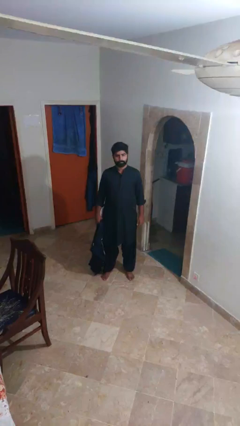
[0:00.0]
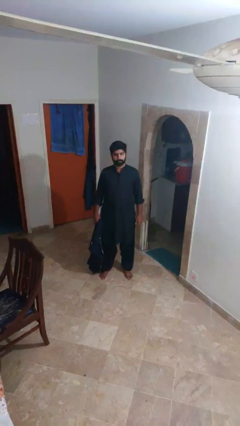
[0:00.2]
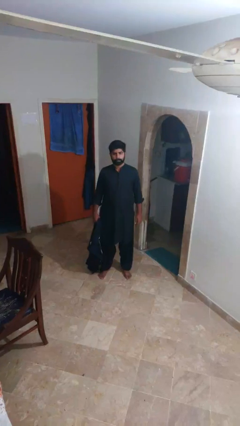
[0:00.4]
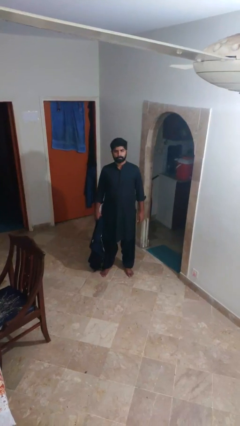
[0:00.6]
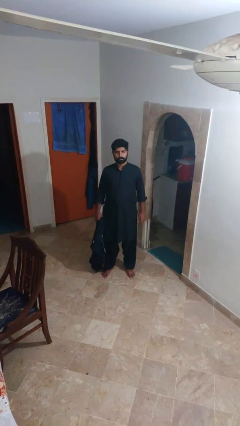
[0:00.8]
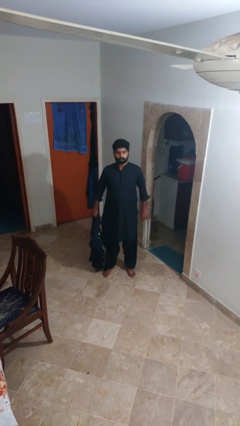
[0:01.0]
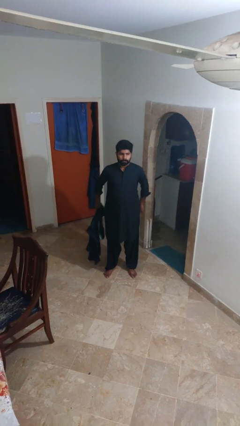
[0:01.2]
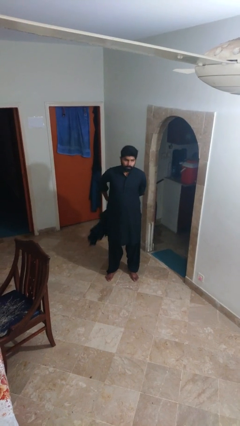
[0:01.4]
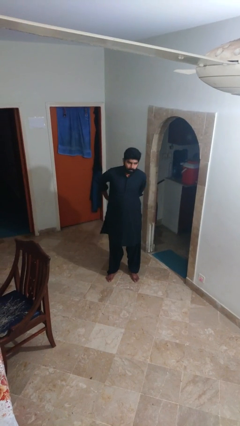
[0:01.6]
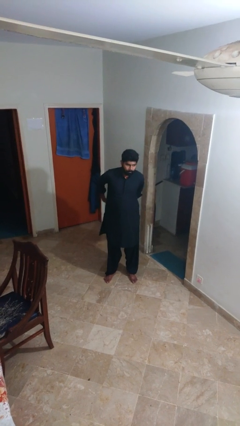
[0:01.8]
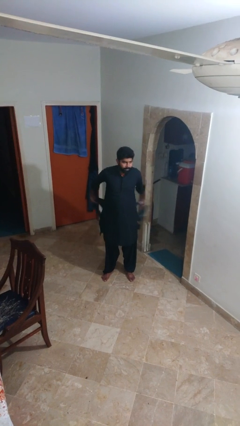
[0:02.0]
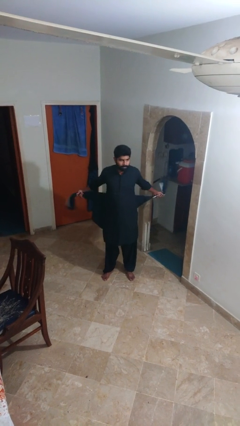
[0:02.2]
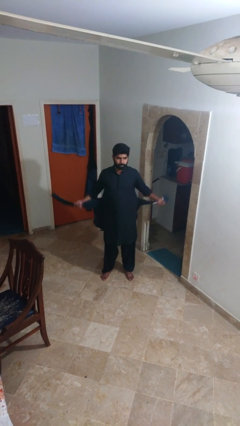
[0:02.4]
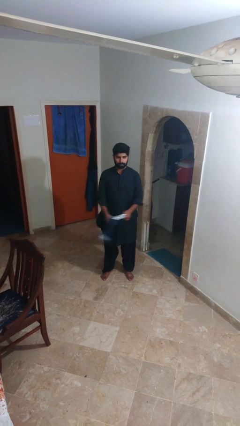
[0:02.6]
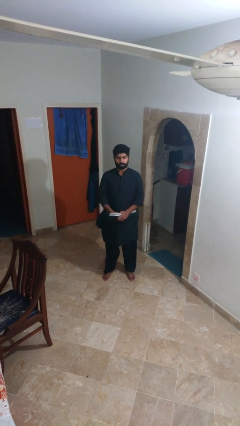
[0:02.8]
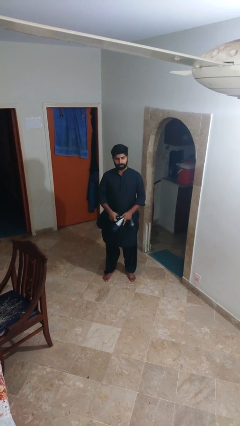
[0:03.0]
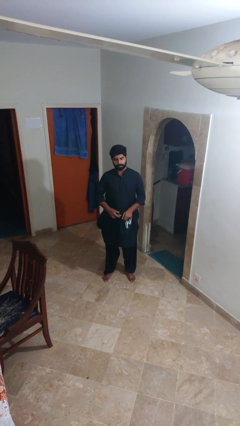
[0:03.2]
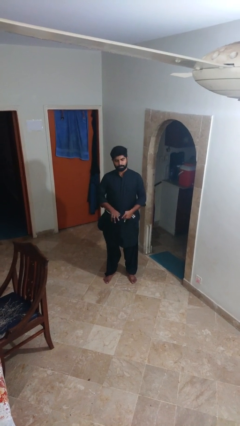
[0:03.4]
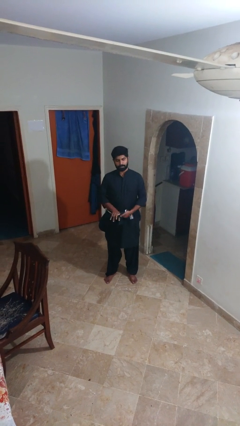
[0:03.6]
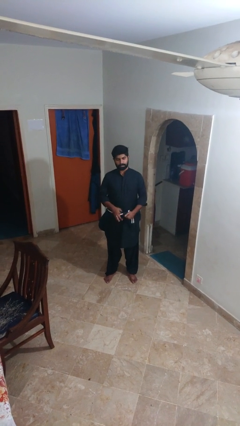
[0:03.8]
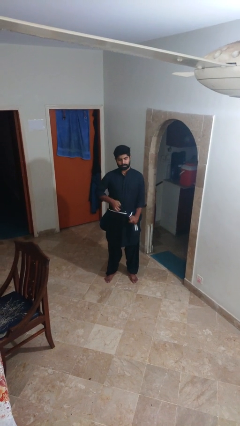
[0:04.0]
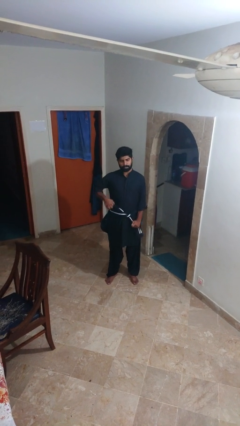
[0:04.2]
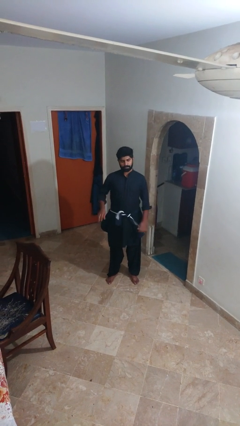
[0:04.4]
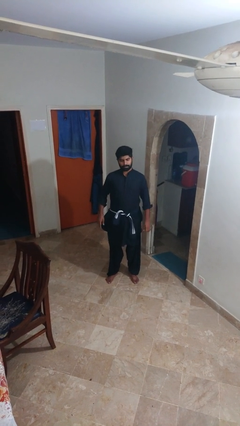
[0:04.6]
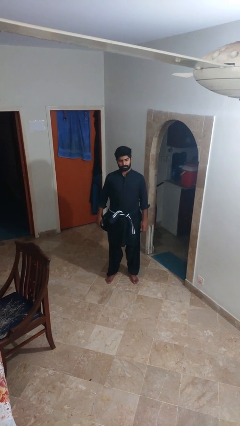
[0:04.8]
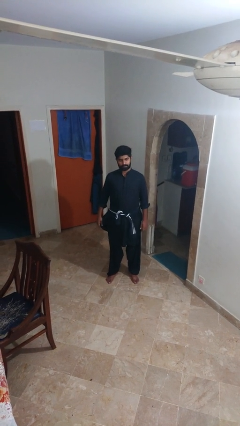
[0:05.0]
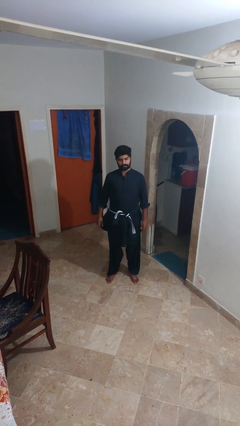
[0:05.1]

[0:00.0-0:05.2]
person ties jacket around waist

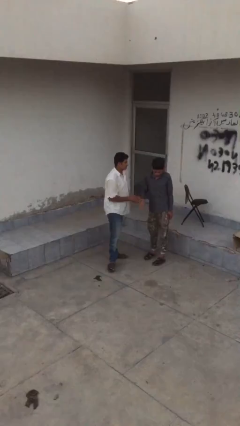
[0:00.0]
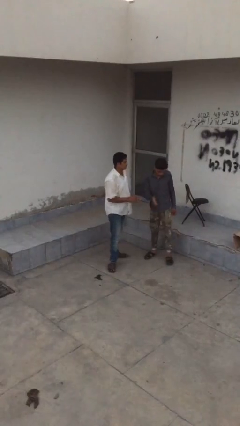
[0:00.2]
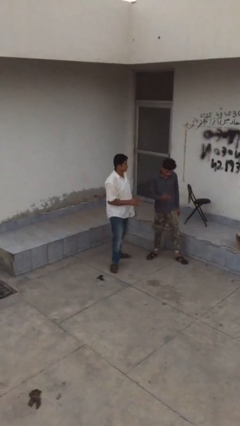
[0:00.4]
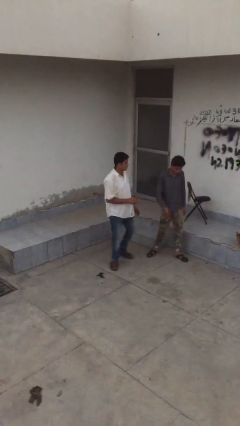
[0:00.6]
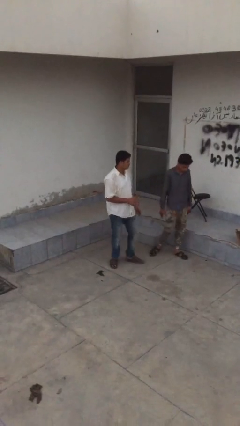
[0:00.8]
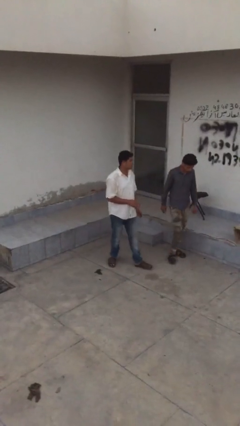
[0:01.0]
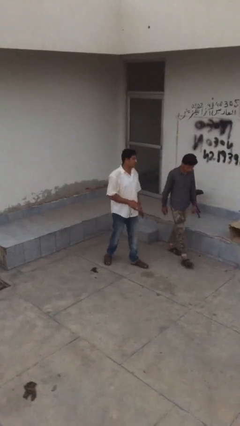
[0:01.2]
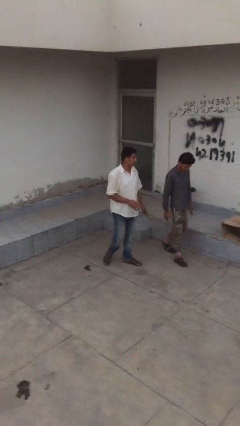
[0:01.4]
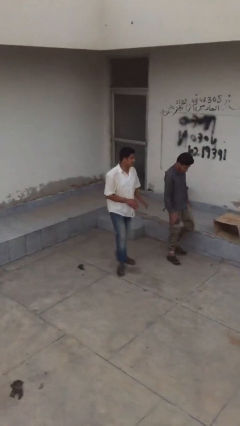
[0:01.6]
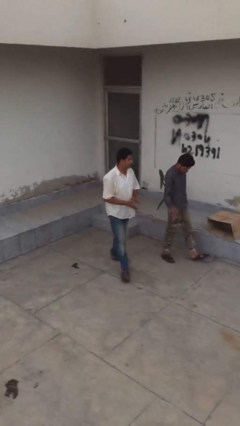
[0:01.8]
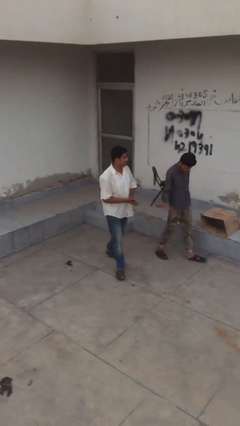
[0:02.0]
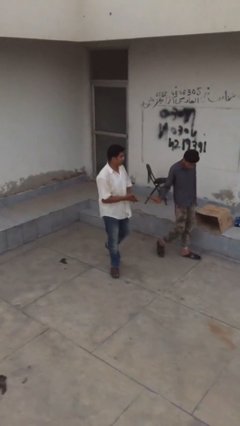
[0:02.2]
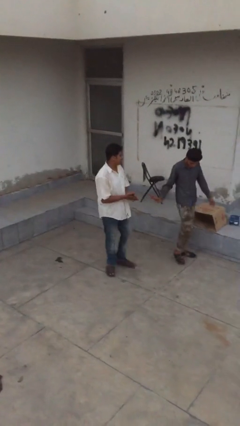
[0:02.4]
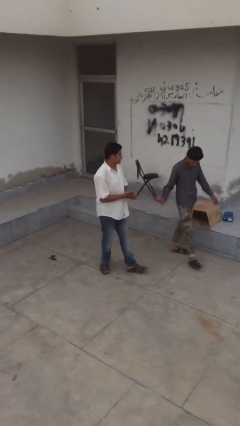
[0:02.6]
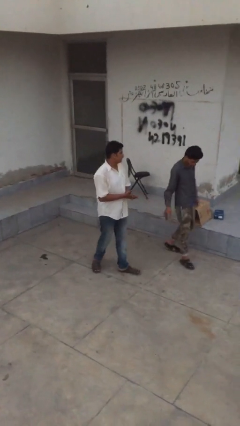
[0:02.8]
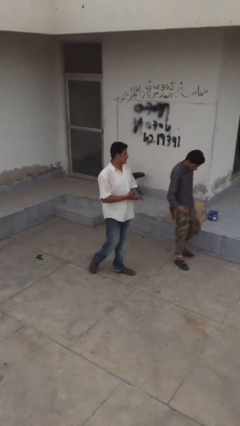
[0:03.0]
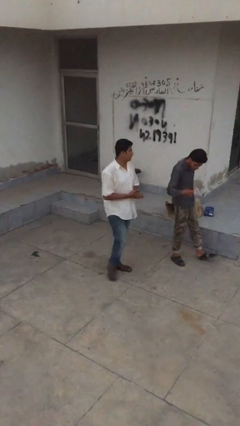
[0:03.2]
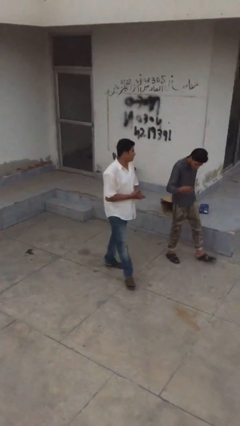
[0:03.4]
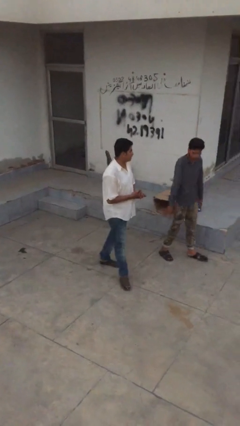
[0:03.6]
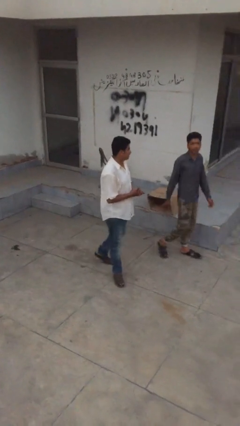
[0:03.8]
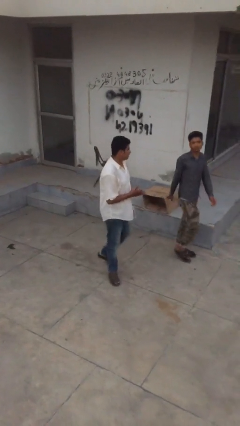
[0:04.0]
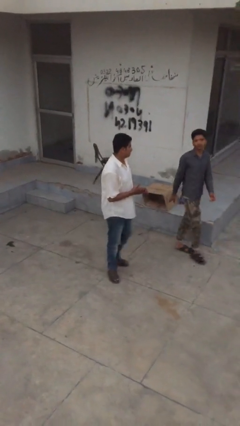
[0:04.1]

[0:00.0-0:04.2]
person talks to person

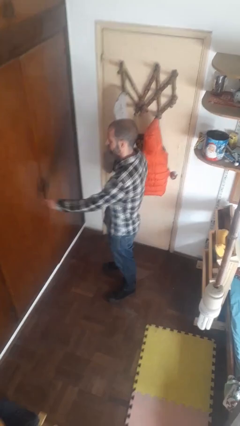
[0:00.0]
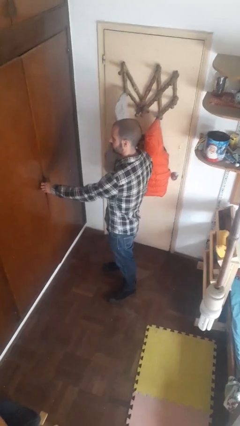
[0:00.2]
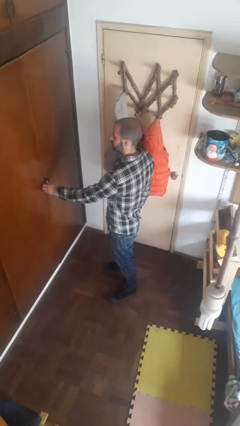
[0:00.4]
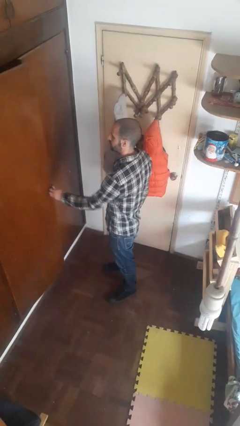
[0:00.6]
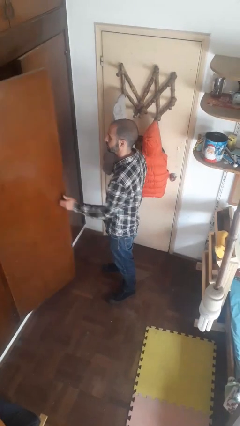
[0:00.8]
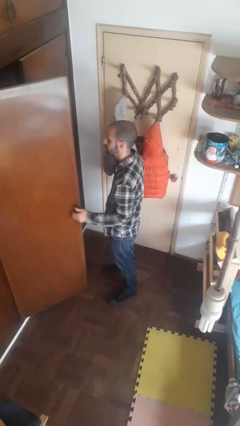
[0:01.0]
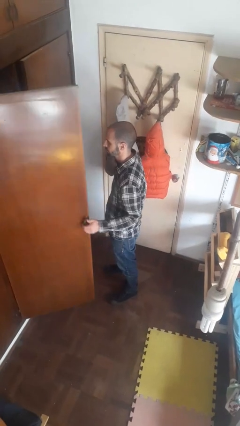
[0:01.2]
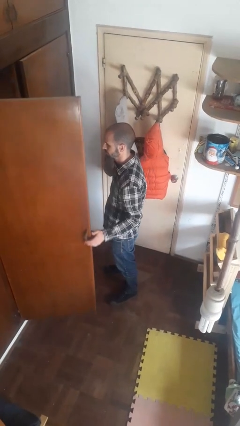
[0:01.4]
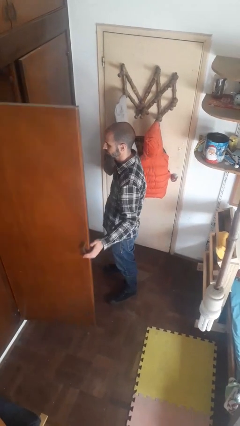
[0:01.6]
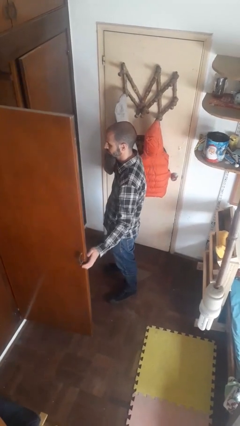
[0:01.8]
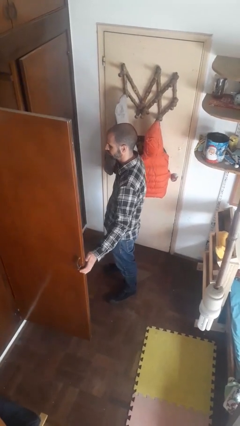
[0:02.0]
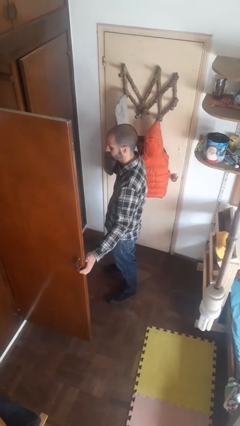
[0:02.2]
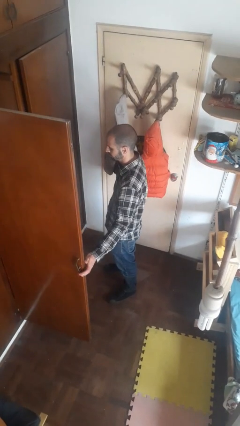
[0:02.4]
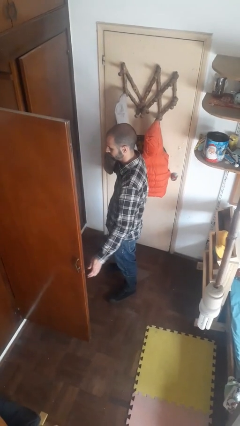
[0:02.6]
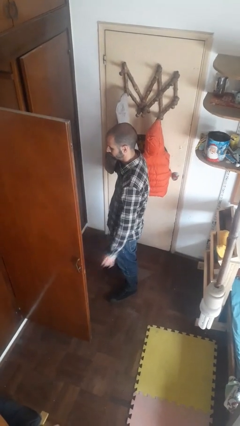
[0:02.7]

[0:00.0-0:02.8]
person opens closet door

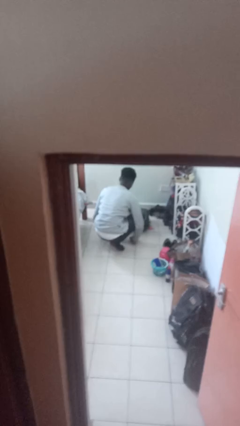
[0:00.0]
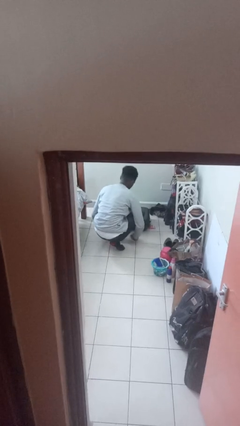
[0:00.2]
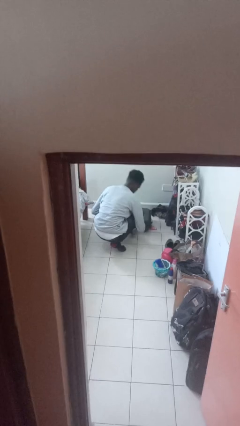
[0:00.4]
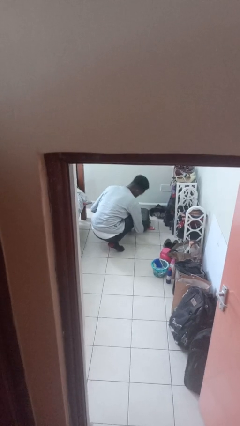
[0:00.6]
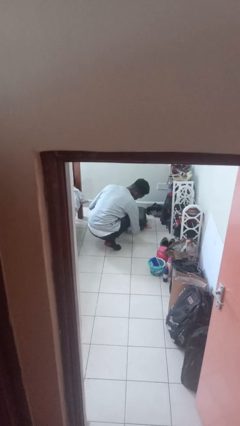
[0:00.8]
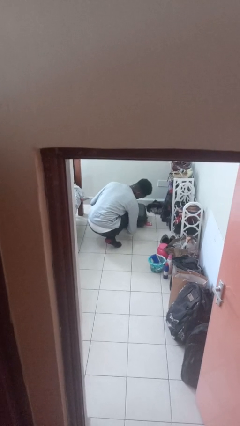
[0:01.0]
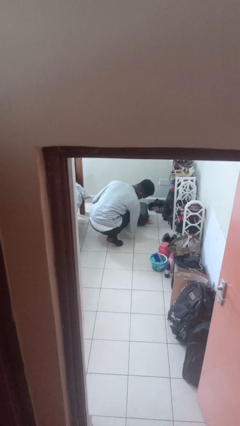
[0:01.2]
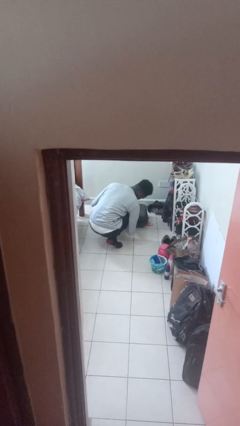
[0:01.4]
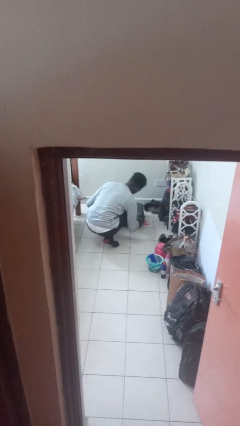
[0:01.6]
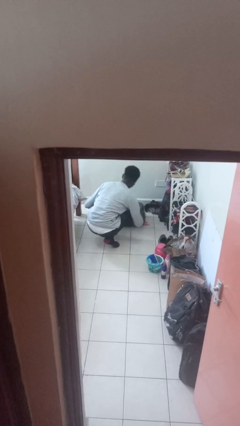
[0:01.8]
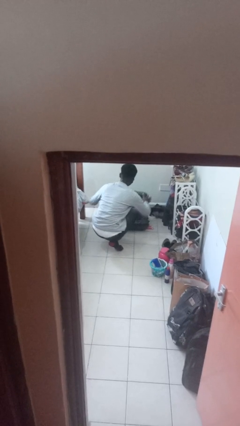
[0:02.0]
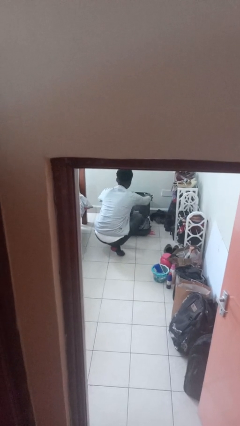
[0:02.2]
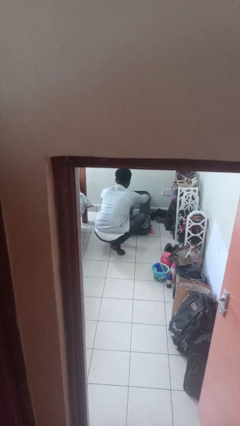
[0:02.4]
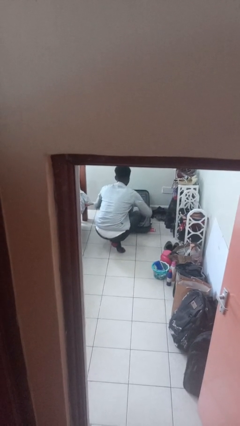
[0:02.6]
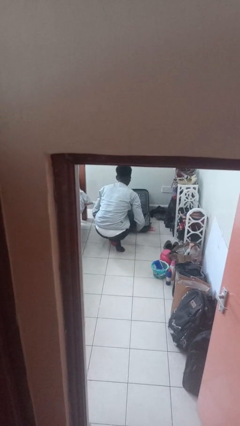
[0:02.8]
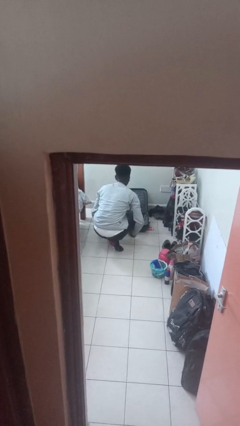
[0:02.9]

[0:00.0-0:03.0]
person opens suitcase

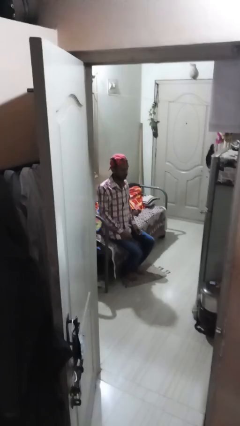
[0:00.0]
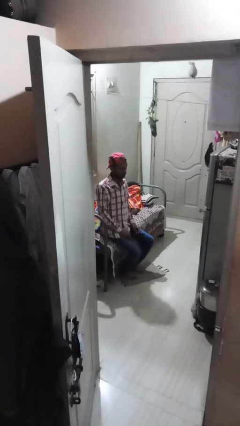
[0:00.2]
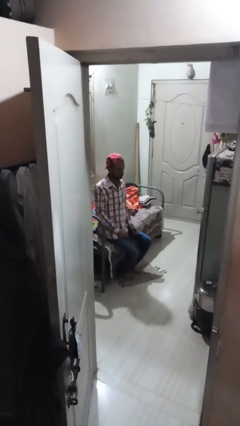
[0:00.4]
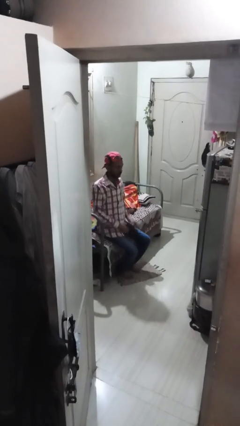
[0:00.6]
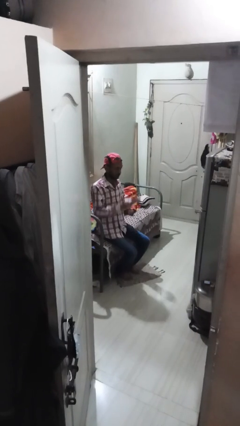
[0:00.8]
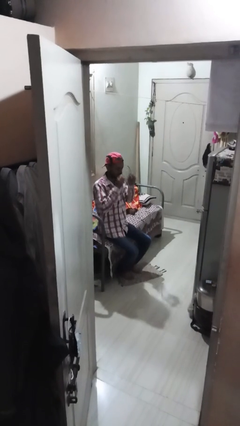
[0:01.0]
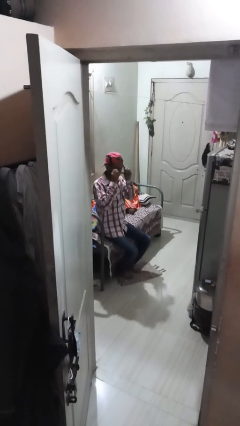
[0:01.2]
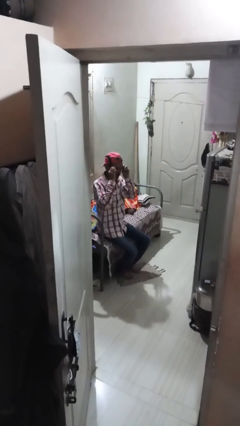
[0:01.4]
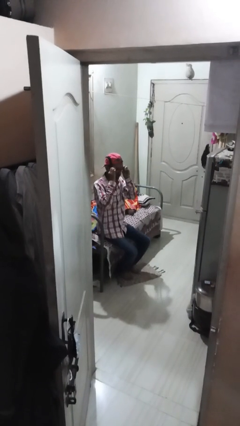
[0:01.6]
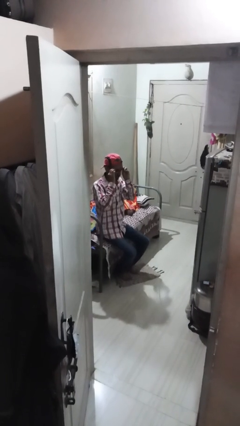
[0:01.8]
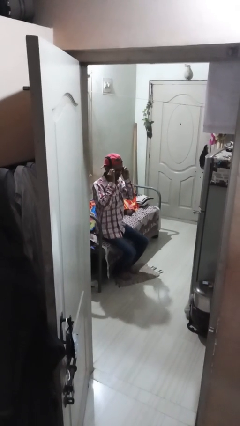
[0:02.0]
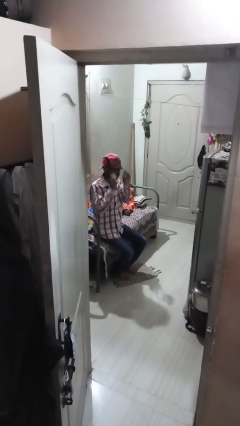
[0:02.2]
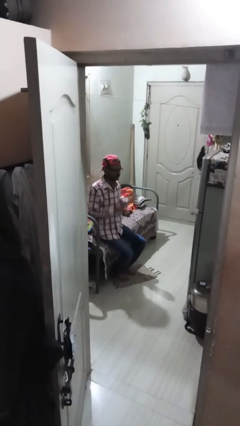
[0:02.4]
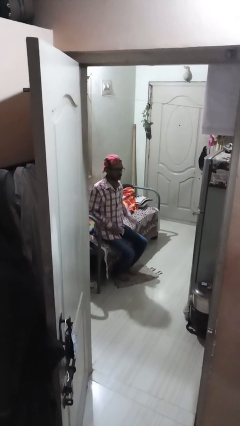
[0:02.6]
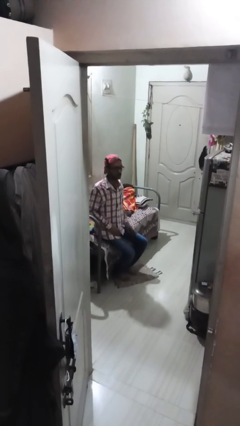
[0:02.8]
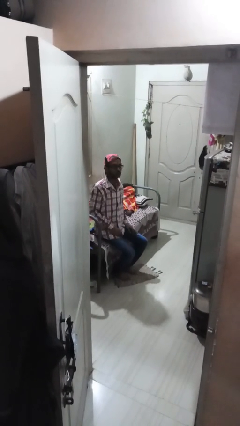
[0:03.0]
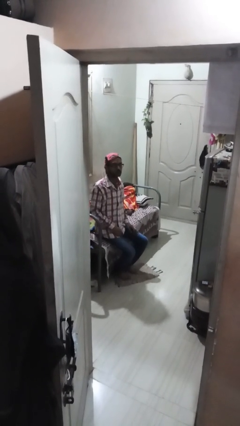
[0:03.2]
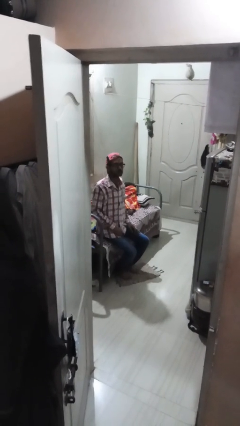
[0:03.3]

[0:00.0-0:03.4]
person puts on glasses
